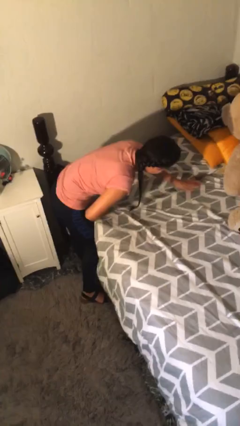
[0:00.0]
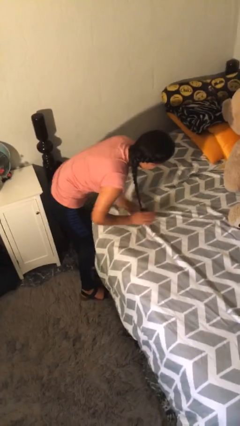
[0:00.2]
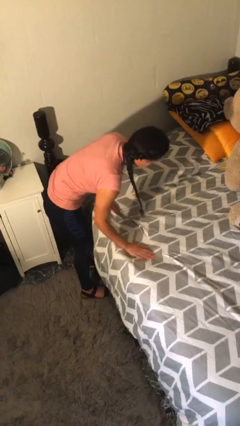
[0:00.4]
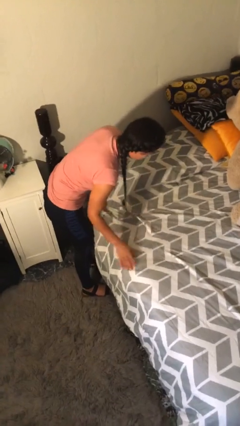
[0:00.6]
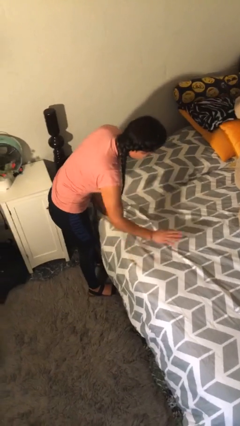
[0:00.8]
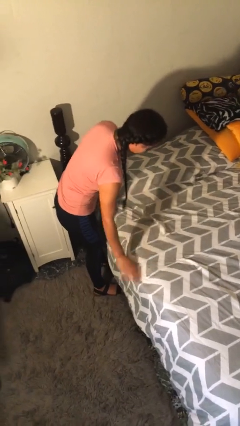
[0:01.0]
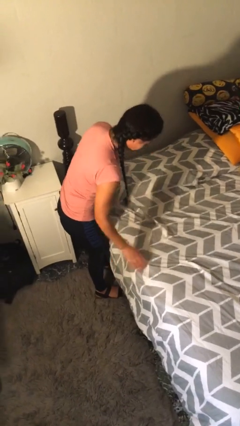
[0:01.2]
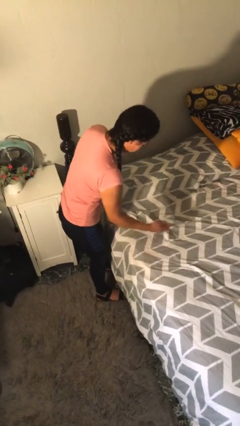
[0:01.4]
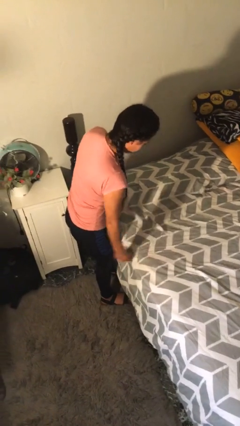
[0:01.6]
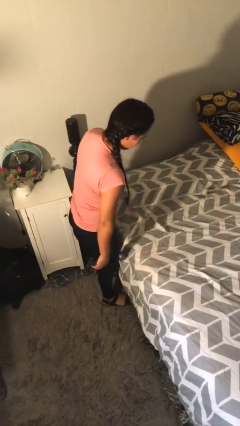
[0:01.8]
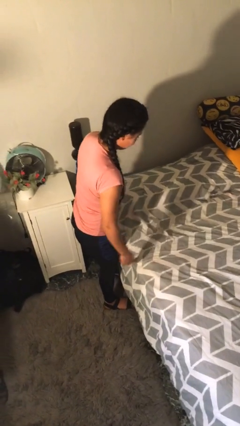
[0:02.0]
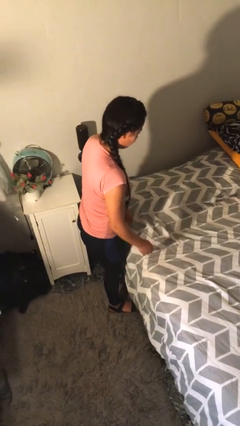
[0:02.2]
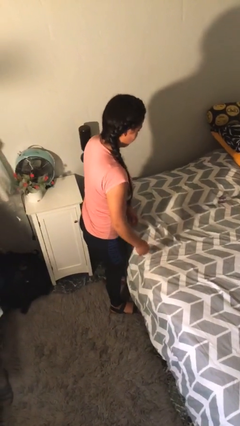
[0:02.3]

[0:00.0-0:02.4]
person makes bed

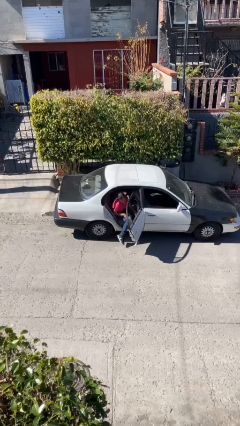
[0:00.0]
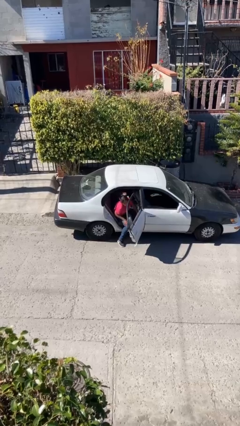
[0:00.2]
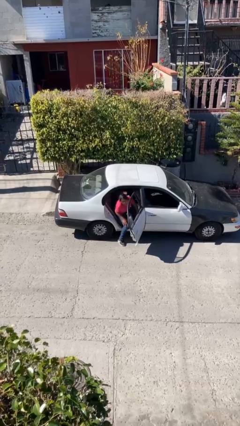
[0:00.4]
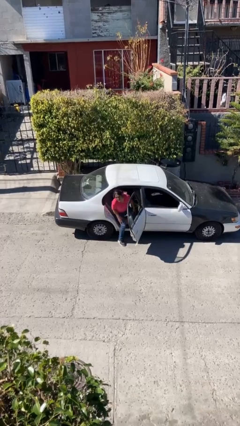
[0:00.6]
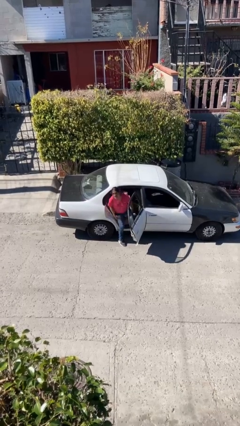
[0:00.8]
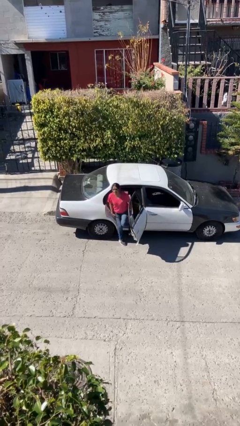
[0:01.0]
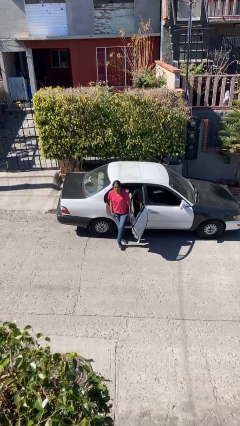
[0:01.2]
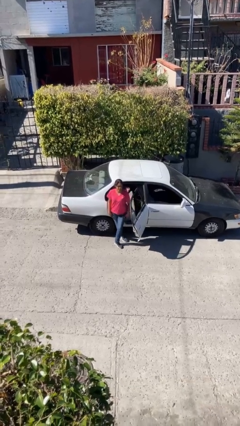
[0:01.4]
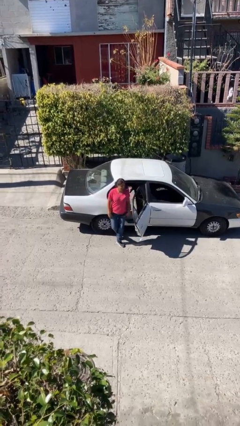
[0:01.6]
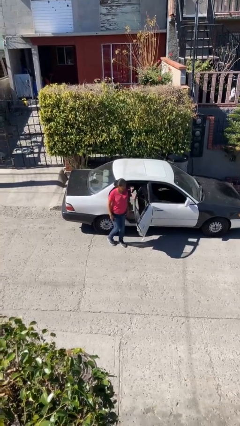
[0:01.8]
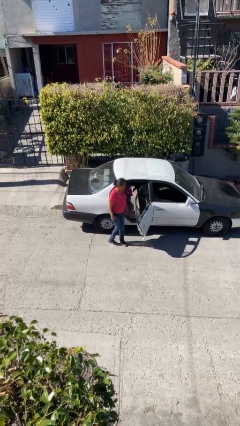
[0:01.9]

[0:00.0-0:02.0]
person exits car

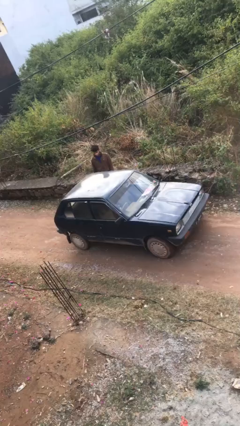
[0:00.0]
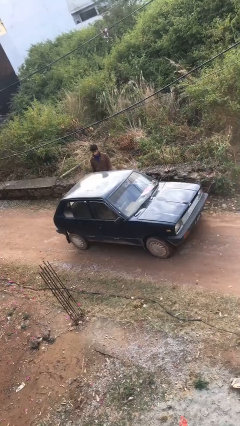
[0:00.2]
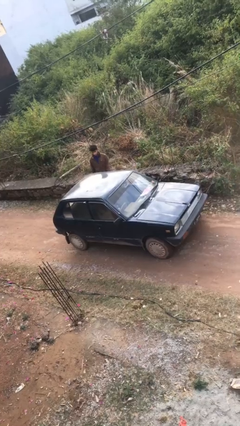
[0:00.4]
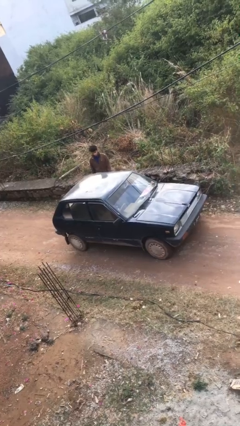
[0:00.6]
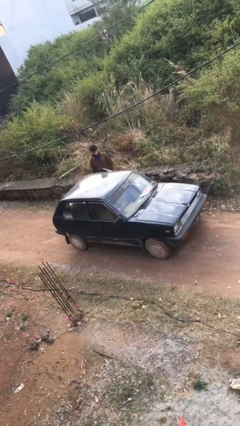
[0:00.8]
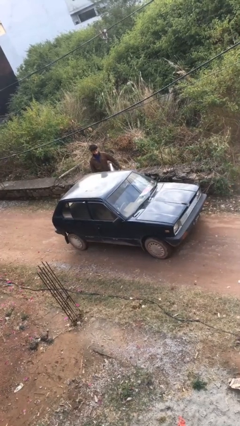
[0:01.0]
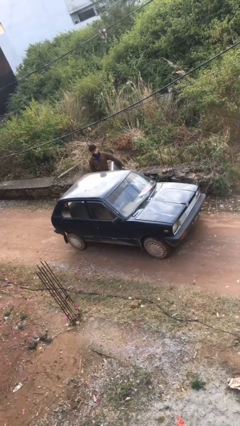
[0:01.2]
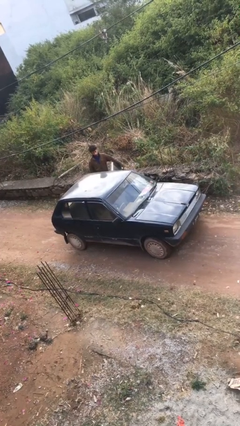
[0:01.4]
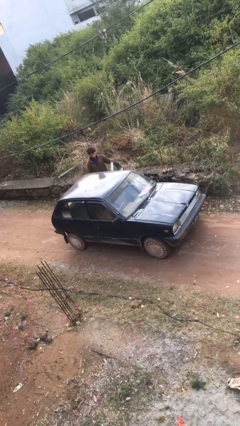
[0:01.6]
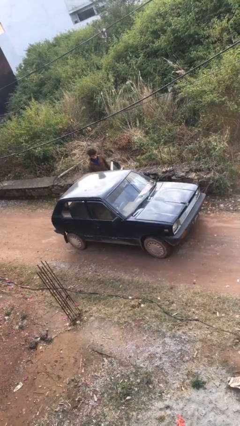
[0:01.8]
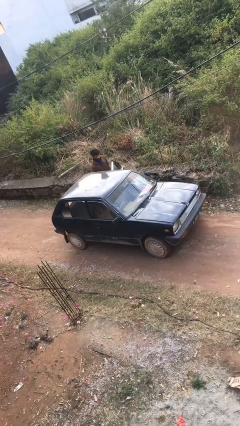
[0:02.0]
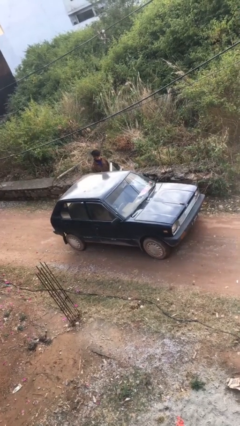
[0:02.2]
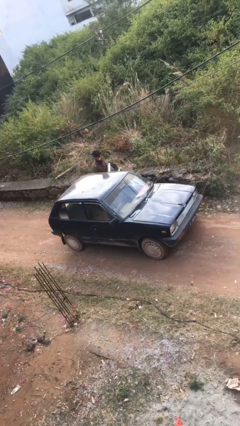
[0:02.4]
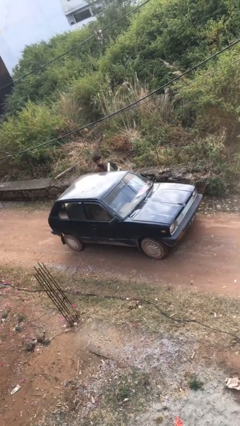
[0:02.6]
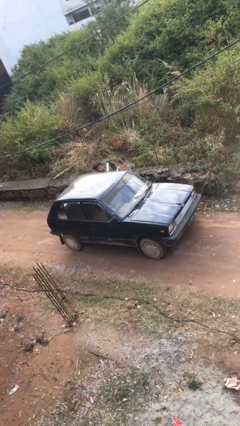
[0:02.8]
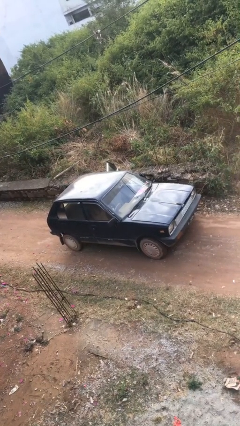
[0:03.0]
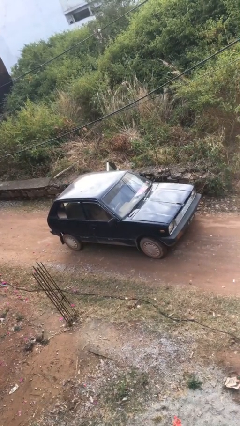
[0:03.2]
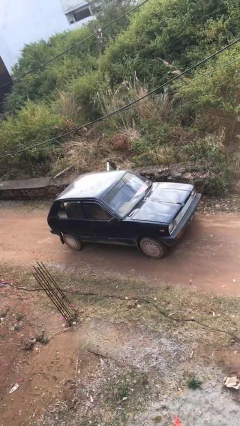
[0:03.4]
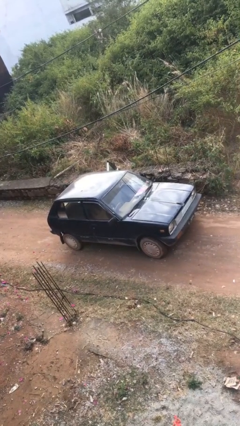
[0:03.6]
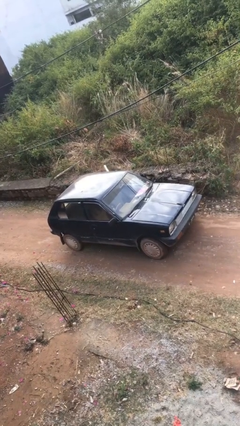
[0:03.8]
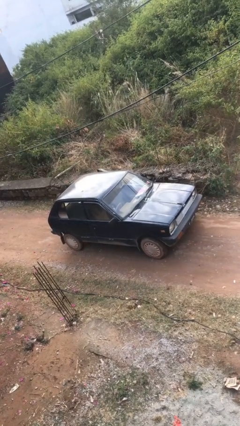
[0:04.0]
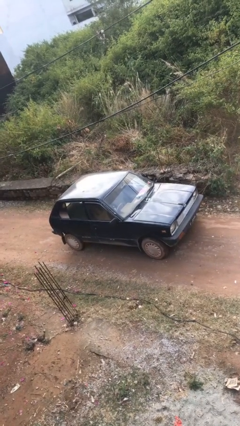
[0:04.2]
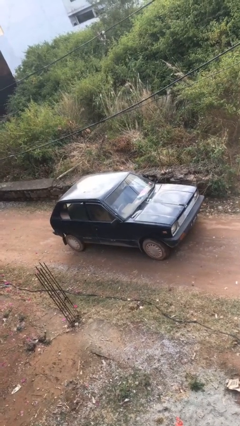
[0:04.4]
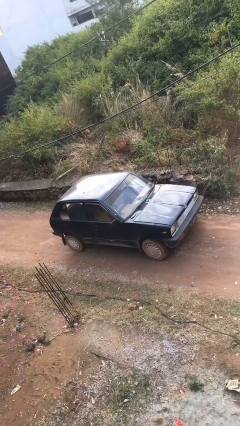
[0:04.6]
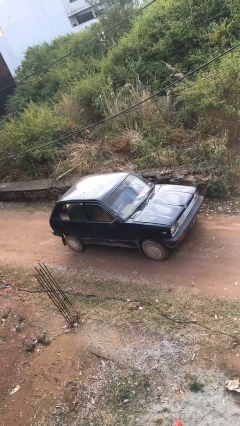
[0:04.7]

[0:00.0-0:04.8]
car picks up person

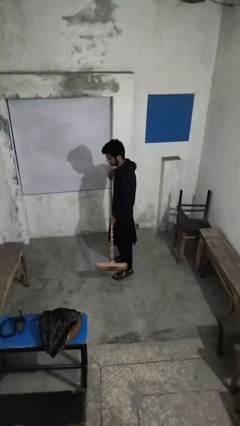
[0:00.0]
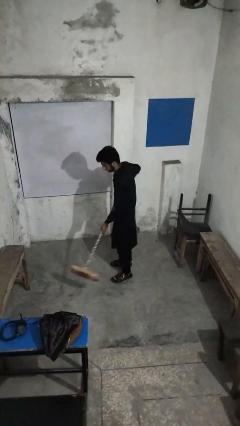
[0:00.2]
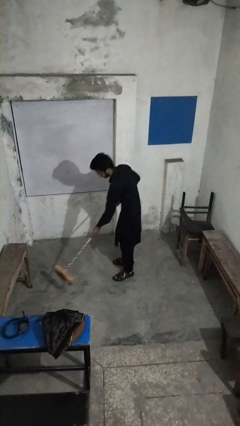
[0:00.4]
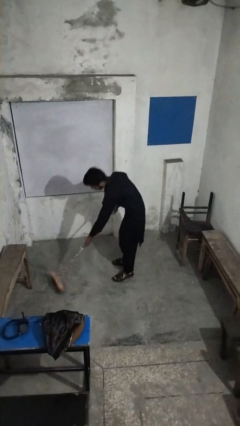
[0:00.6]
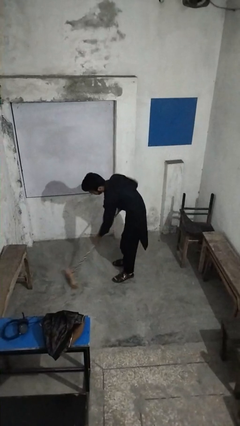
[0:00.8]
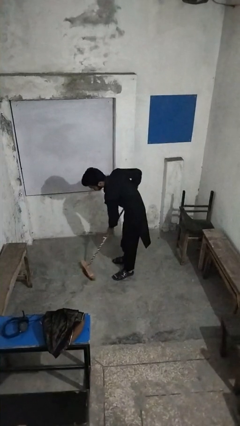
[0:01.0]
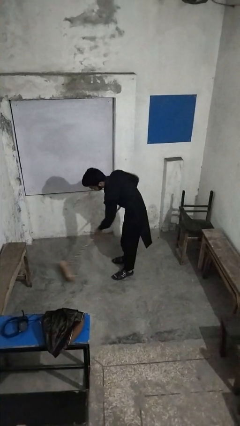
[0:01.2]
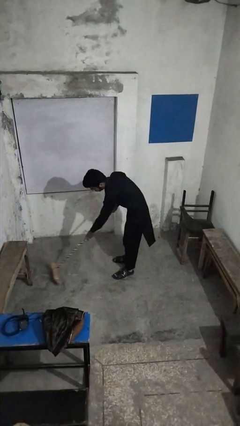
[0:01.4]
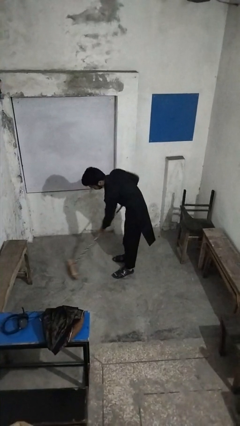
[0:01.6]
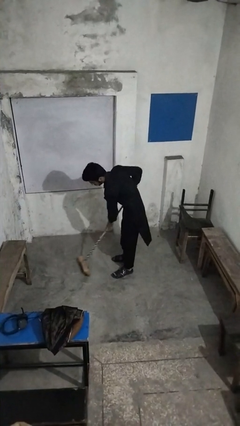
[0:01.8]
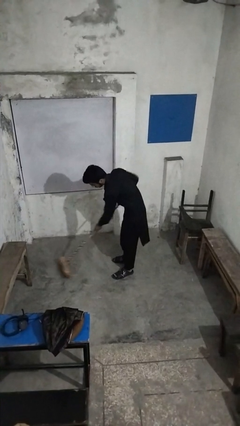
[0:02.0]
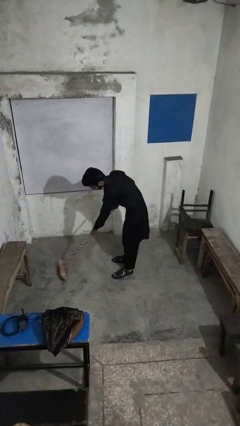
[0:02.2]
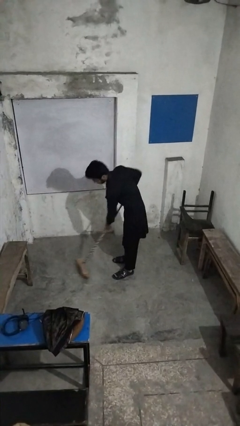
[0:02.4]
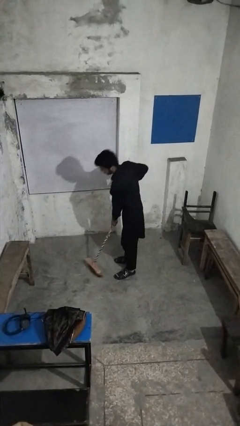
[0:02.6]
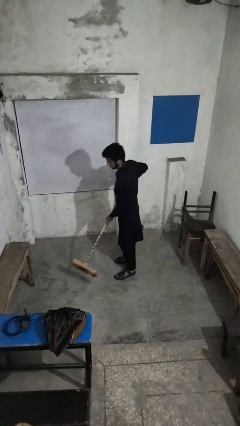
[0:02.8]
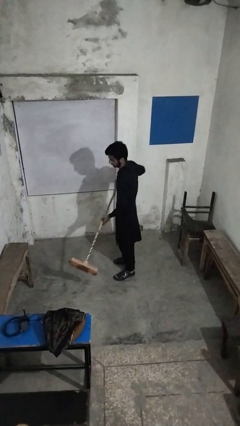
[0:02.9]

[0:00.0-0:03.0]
person sweeps floor

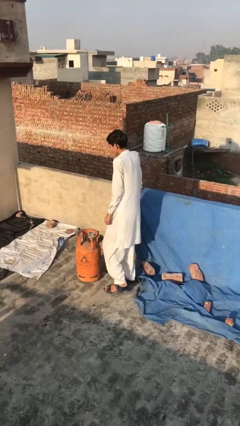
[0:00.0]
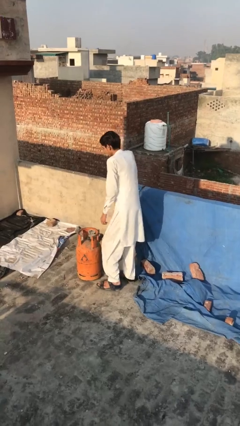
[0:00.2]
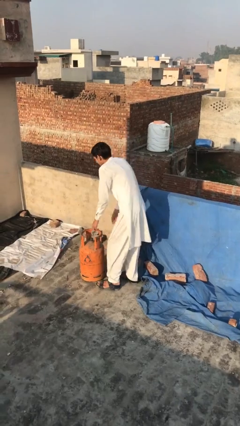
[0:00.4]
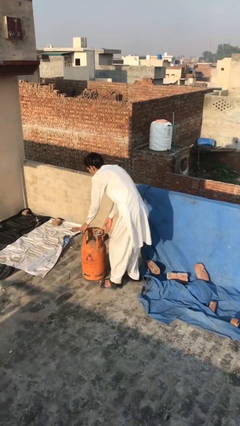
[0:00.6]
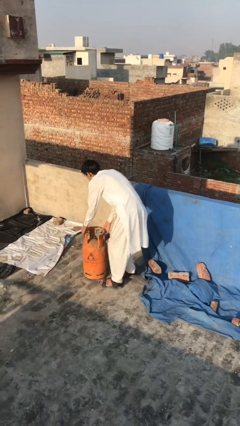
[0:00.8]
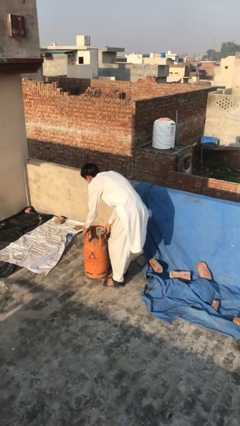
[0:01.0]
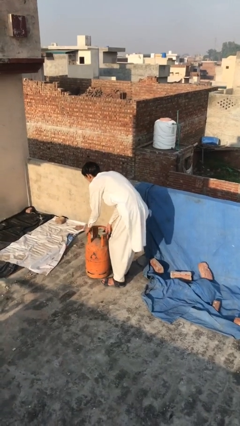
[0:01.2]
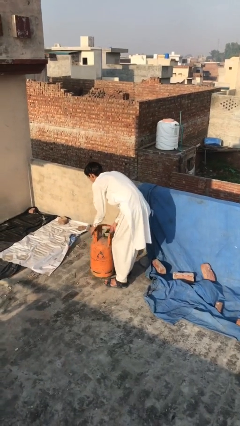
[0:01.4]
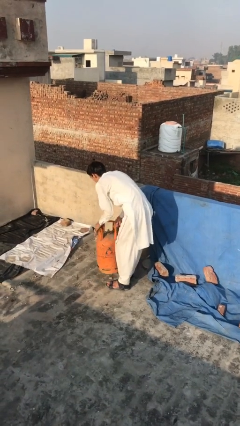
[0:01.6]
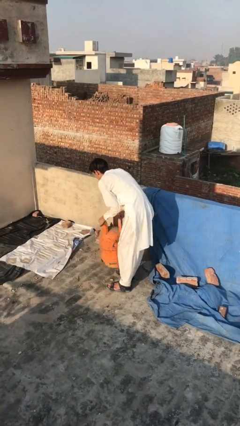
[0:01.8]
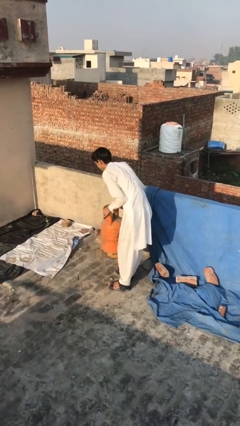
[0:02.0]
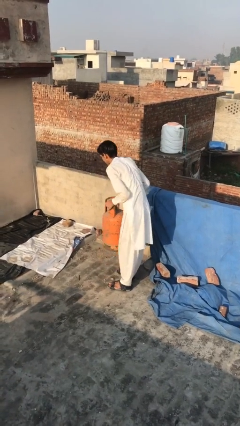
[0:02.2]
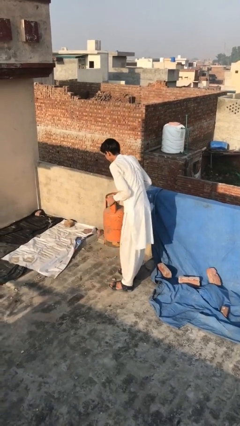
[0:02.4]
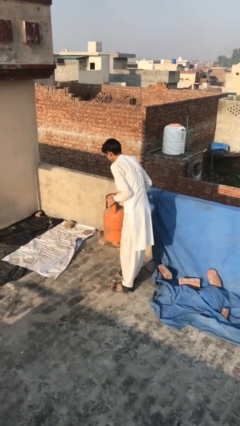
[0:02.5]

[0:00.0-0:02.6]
person picks up object from floor

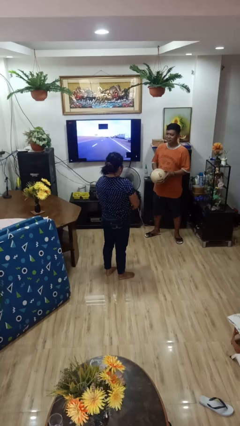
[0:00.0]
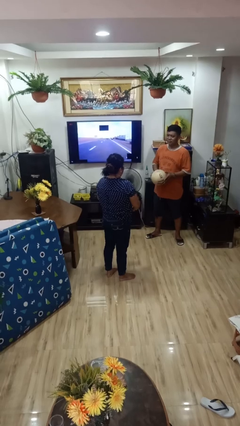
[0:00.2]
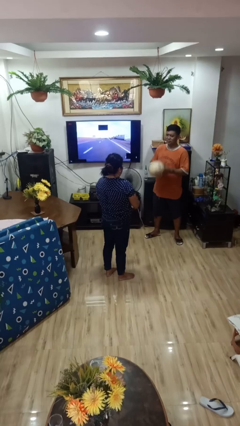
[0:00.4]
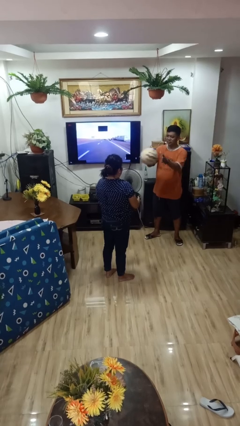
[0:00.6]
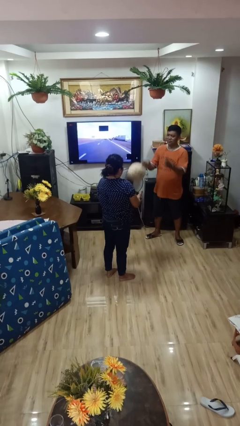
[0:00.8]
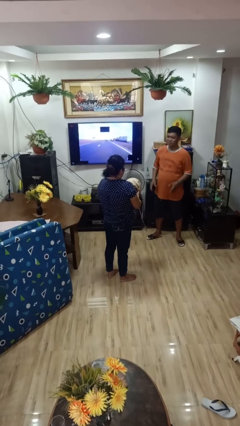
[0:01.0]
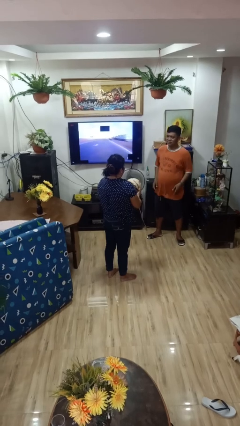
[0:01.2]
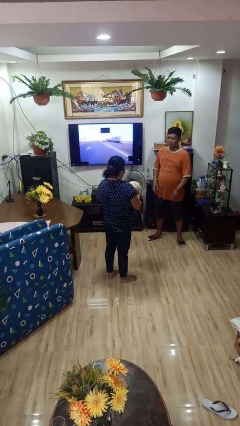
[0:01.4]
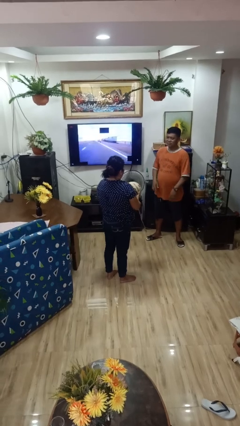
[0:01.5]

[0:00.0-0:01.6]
person catches object from person

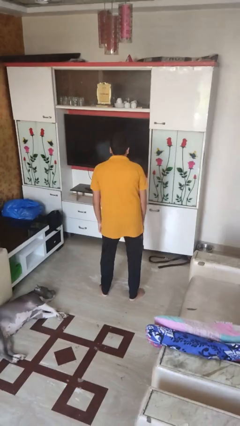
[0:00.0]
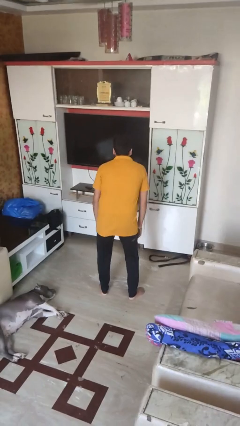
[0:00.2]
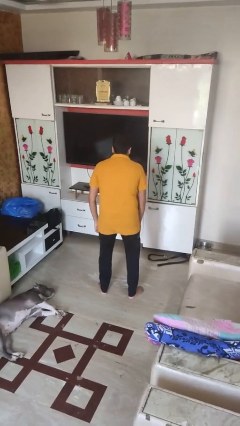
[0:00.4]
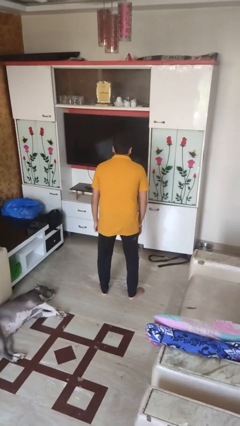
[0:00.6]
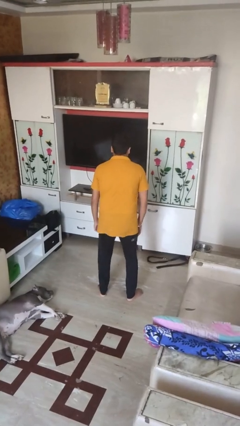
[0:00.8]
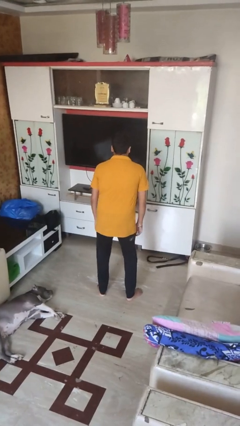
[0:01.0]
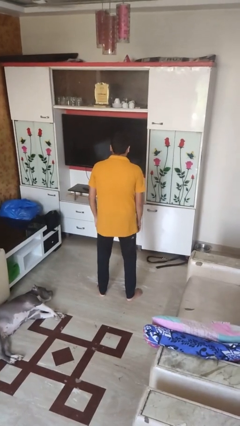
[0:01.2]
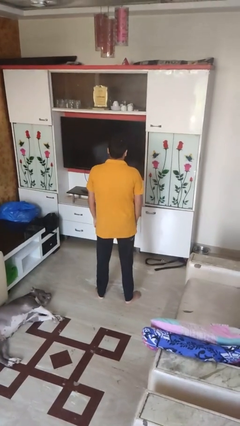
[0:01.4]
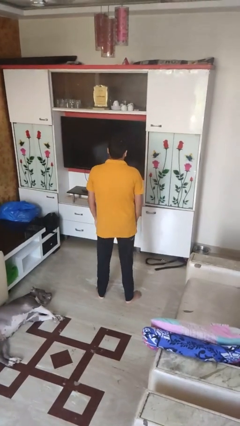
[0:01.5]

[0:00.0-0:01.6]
person wiggles hips
